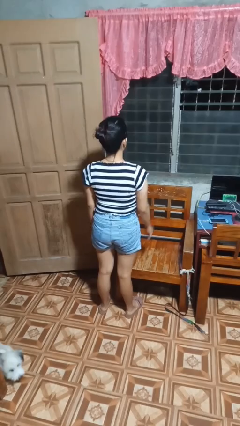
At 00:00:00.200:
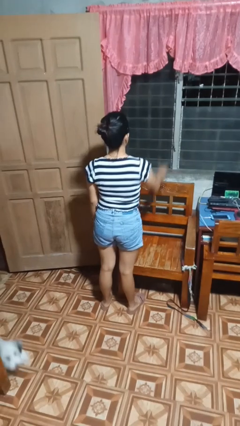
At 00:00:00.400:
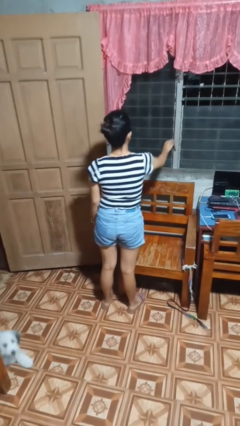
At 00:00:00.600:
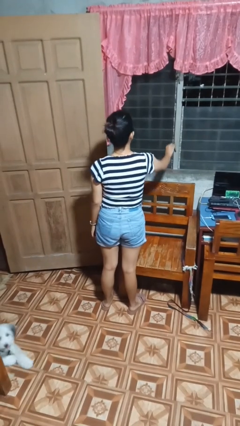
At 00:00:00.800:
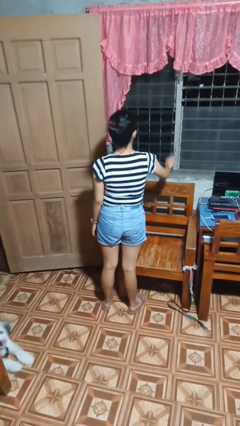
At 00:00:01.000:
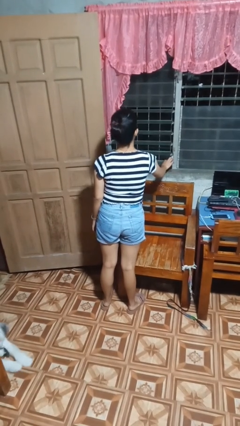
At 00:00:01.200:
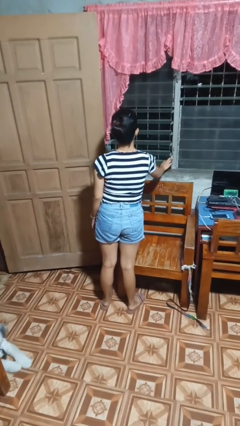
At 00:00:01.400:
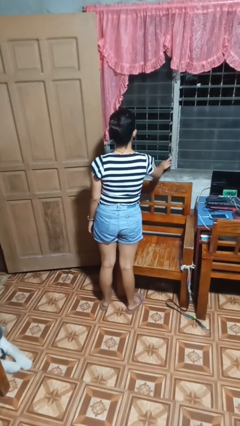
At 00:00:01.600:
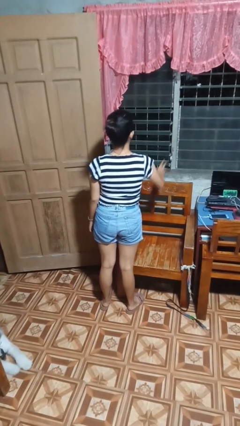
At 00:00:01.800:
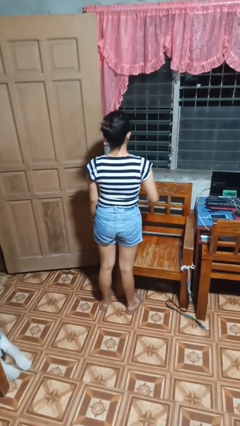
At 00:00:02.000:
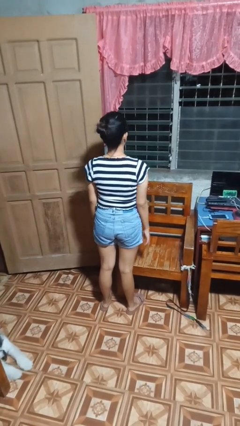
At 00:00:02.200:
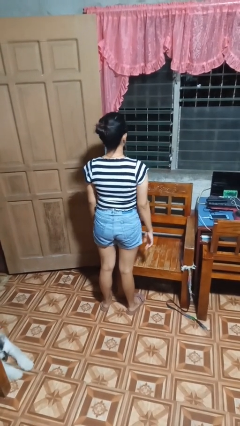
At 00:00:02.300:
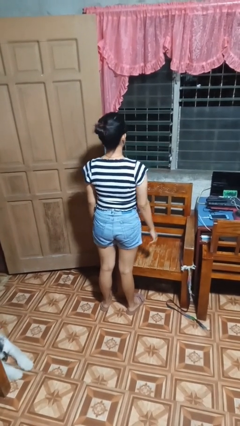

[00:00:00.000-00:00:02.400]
person opens home window

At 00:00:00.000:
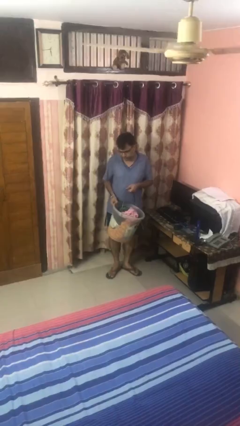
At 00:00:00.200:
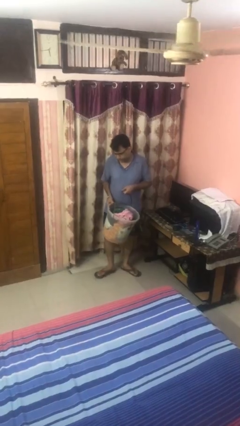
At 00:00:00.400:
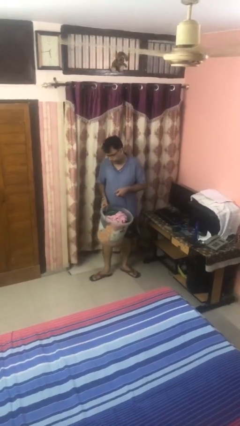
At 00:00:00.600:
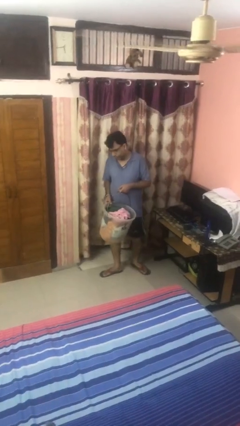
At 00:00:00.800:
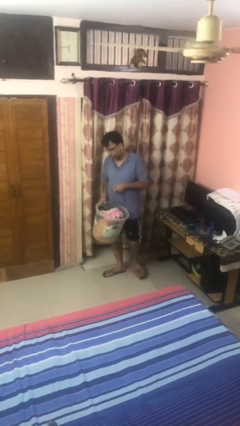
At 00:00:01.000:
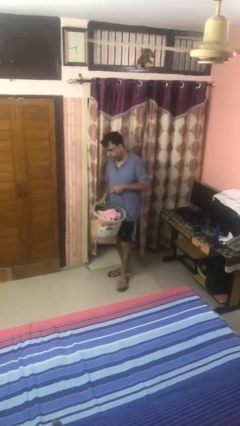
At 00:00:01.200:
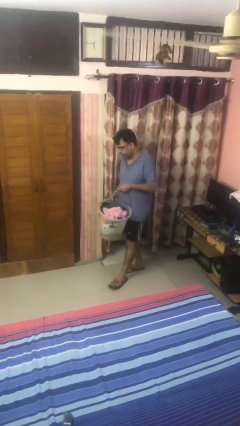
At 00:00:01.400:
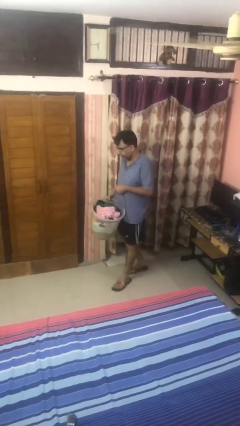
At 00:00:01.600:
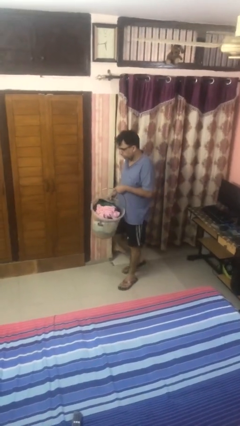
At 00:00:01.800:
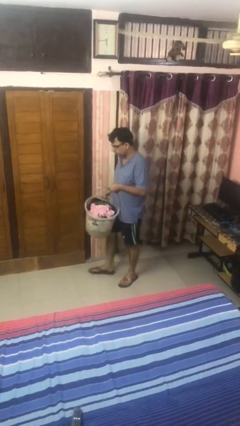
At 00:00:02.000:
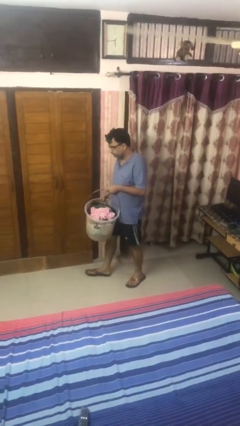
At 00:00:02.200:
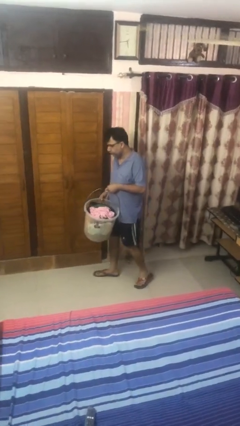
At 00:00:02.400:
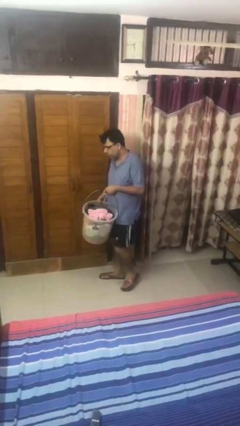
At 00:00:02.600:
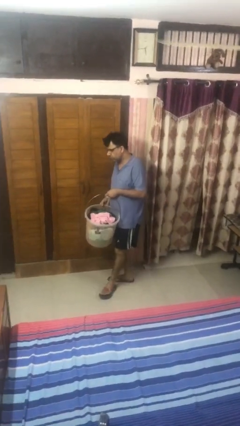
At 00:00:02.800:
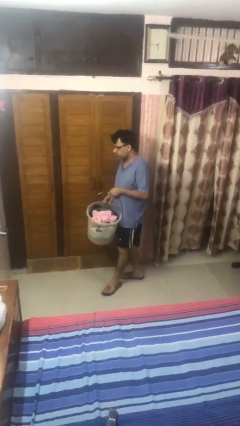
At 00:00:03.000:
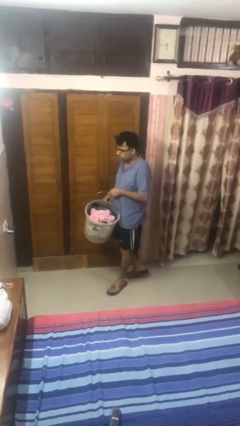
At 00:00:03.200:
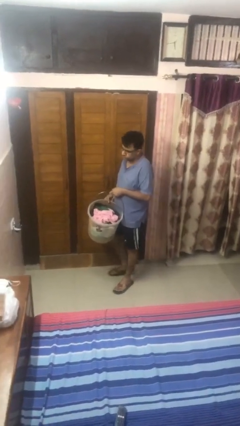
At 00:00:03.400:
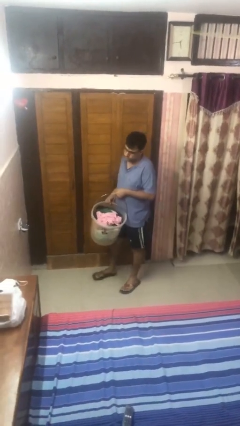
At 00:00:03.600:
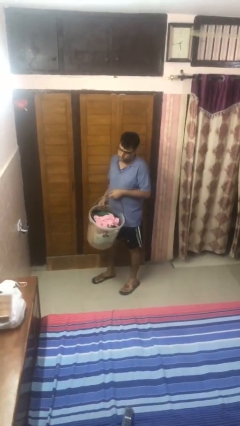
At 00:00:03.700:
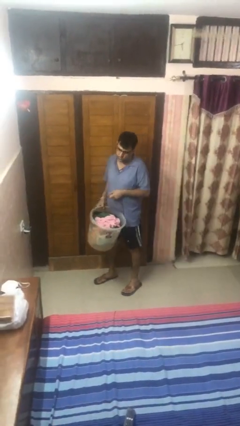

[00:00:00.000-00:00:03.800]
person carries laundry basket

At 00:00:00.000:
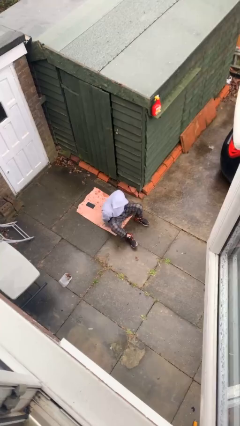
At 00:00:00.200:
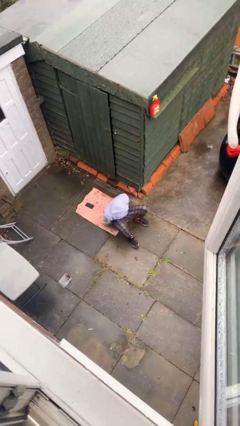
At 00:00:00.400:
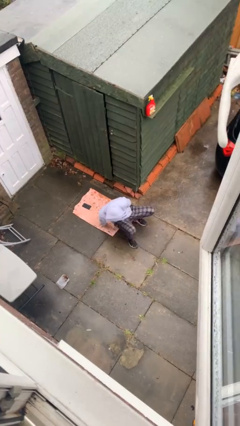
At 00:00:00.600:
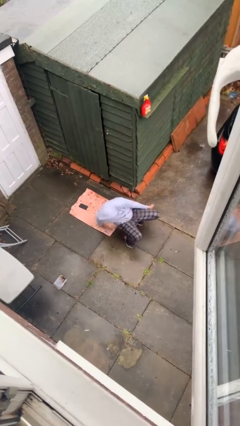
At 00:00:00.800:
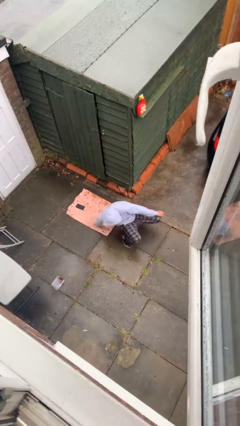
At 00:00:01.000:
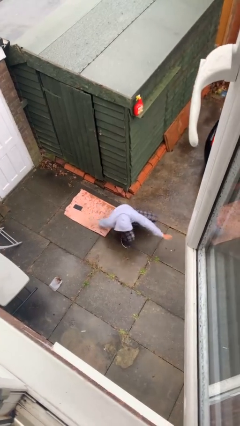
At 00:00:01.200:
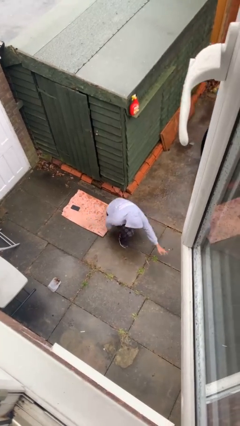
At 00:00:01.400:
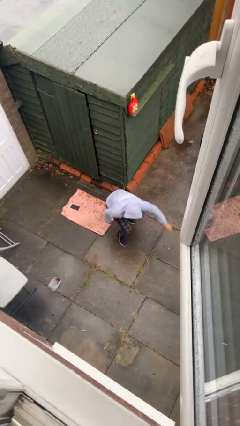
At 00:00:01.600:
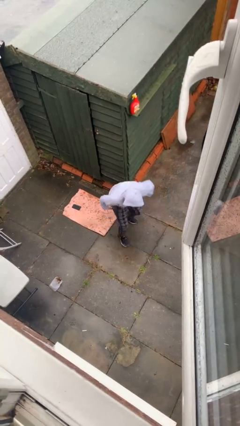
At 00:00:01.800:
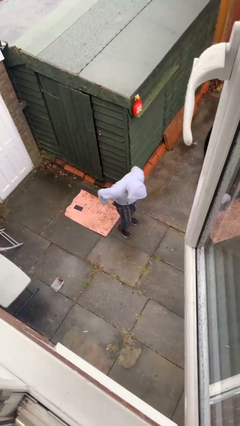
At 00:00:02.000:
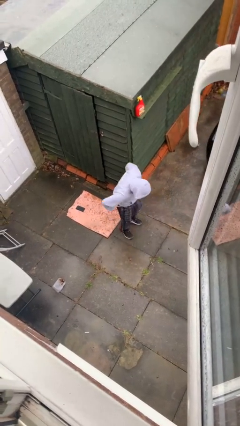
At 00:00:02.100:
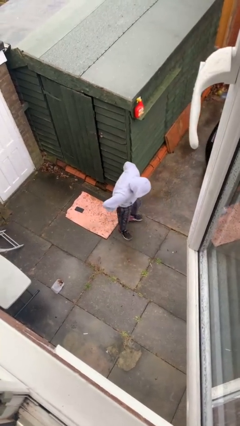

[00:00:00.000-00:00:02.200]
person stands up

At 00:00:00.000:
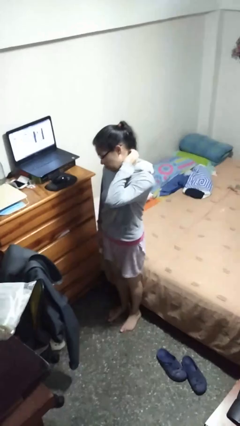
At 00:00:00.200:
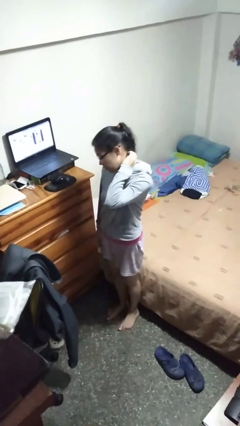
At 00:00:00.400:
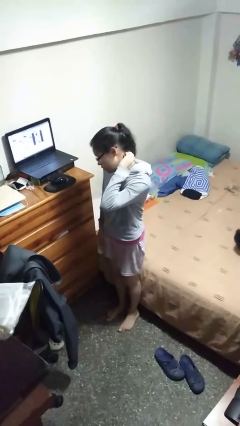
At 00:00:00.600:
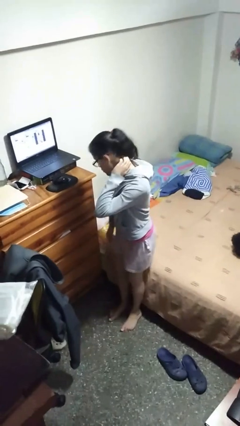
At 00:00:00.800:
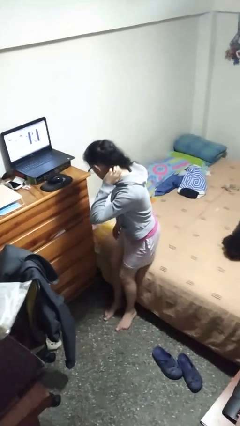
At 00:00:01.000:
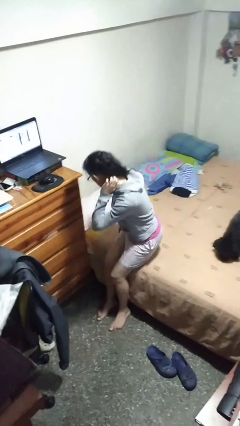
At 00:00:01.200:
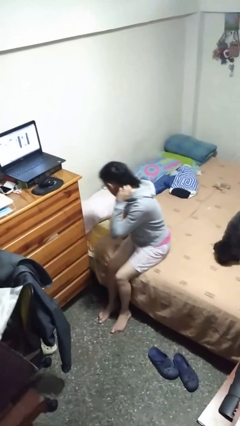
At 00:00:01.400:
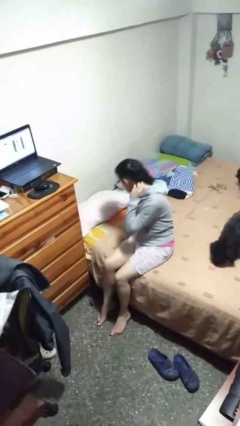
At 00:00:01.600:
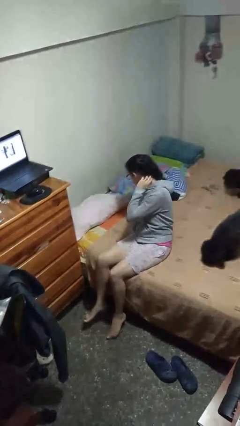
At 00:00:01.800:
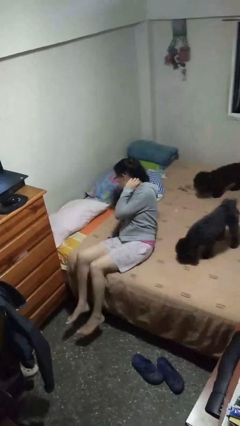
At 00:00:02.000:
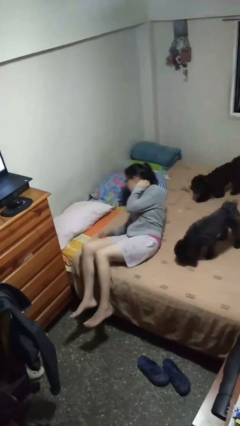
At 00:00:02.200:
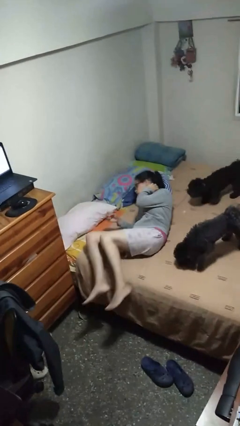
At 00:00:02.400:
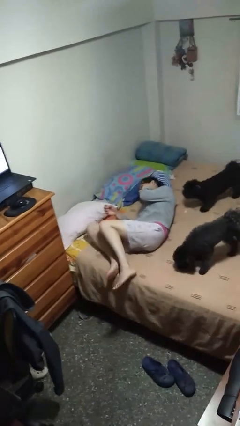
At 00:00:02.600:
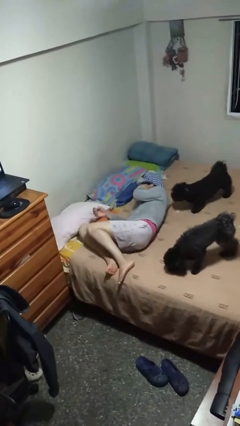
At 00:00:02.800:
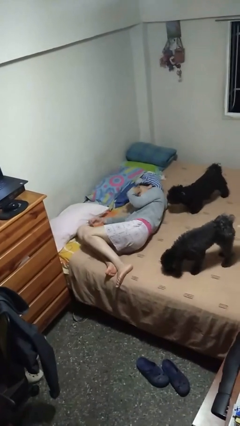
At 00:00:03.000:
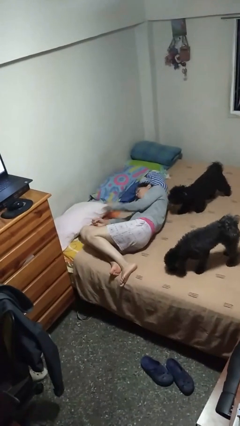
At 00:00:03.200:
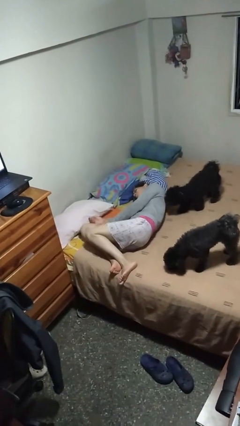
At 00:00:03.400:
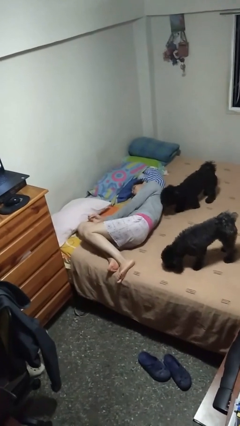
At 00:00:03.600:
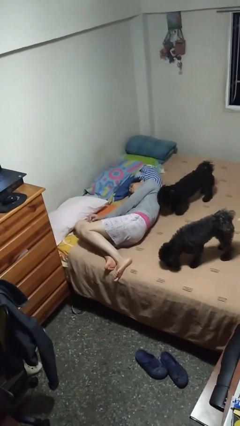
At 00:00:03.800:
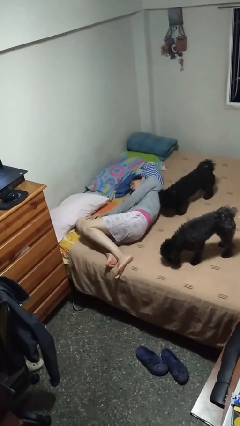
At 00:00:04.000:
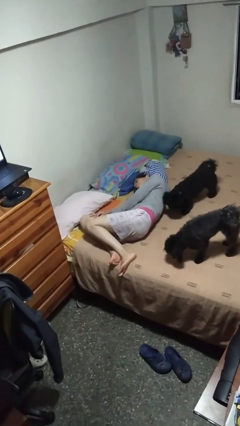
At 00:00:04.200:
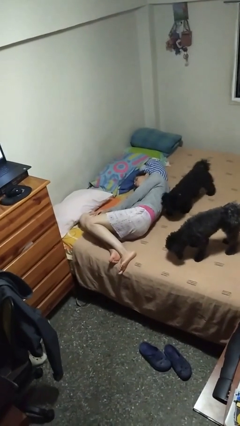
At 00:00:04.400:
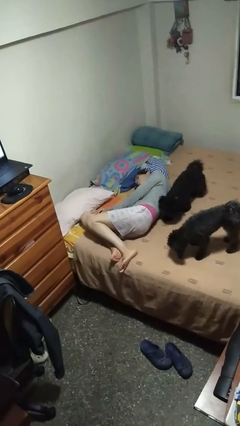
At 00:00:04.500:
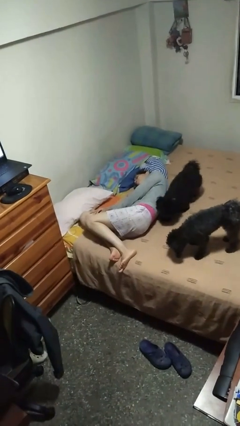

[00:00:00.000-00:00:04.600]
person lies down on bed

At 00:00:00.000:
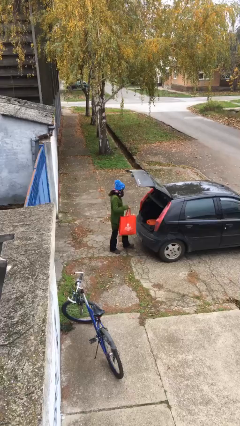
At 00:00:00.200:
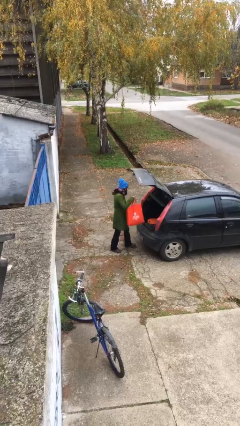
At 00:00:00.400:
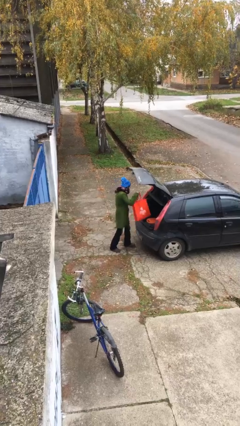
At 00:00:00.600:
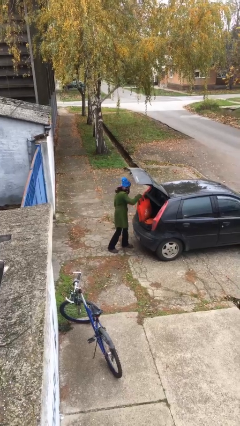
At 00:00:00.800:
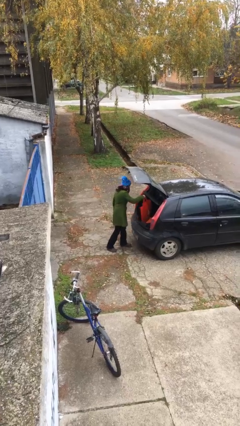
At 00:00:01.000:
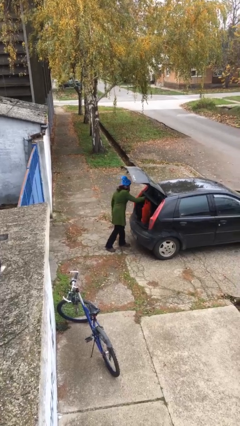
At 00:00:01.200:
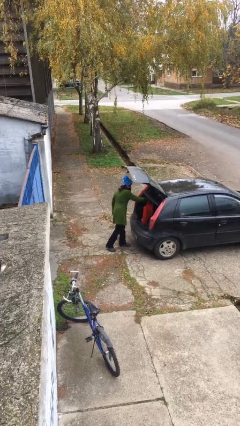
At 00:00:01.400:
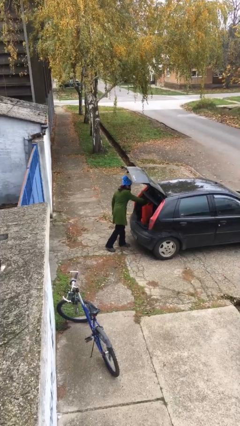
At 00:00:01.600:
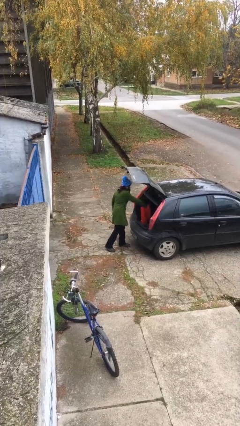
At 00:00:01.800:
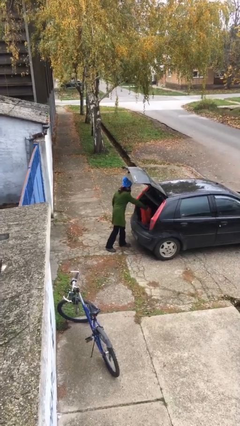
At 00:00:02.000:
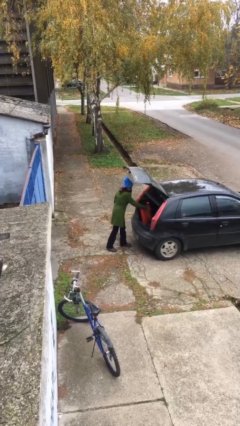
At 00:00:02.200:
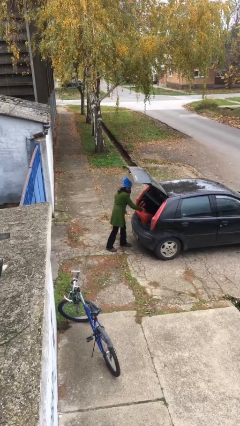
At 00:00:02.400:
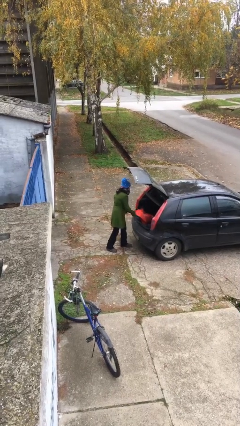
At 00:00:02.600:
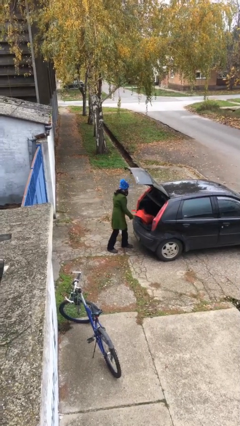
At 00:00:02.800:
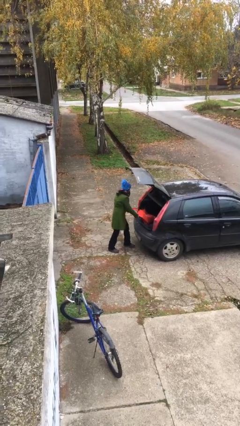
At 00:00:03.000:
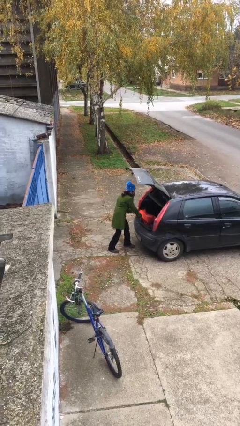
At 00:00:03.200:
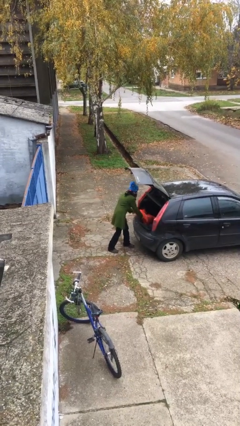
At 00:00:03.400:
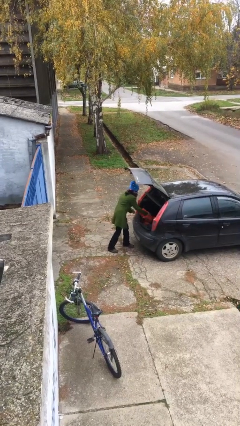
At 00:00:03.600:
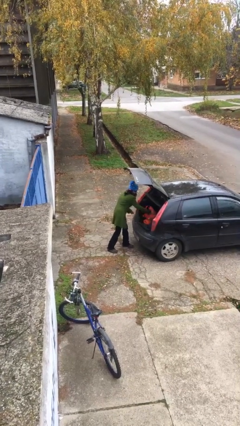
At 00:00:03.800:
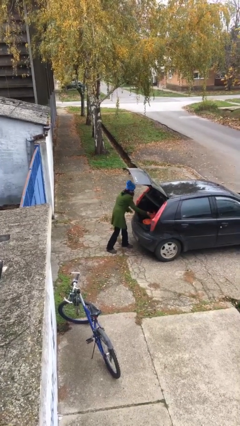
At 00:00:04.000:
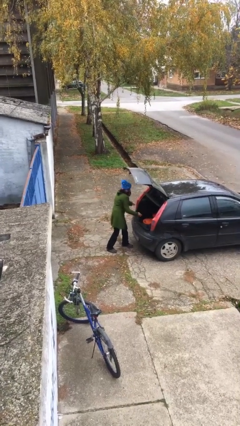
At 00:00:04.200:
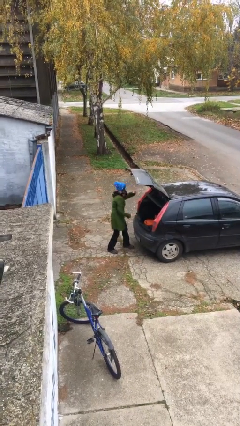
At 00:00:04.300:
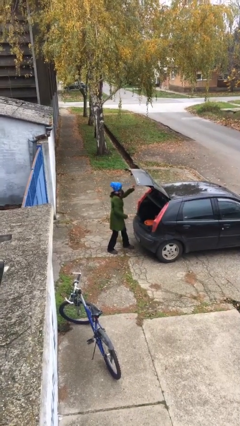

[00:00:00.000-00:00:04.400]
person loads car
